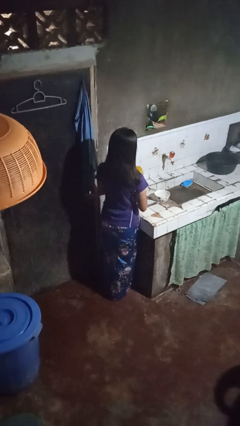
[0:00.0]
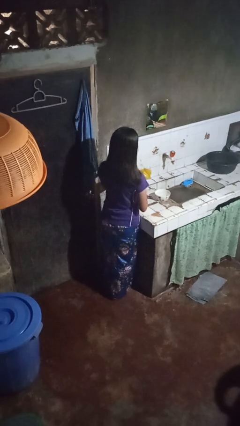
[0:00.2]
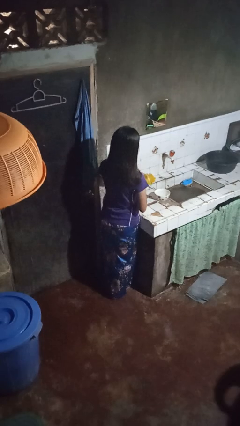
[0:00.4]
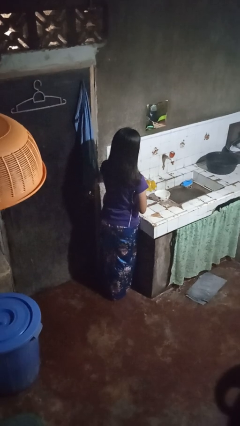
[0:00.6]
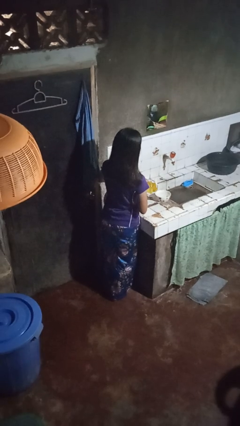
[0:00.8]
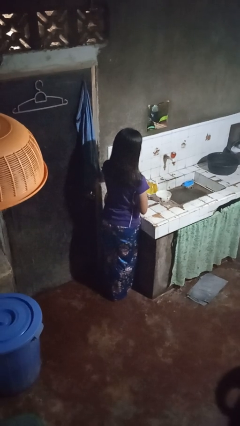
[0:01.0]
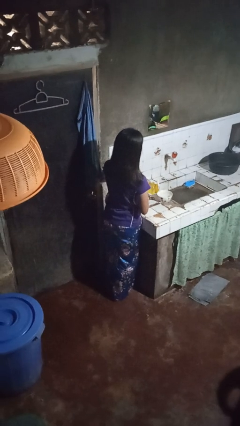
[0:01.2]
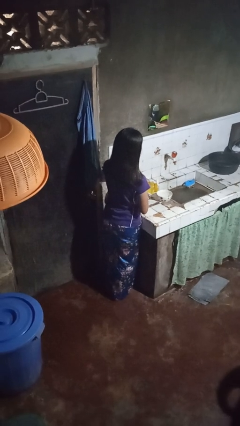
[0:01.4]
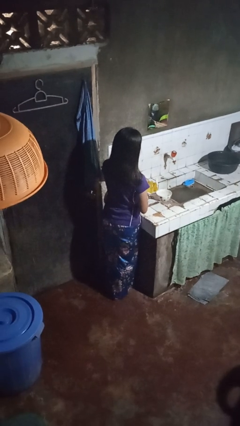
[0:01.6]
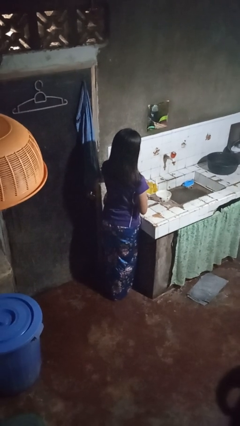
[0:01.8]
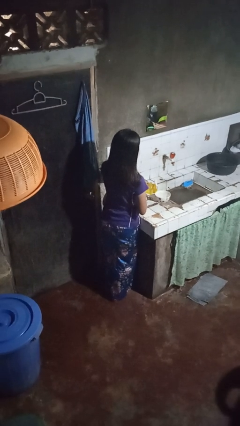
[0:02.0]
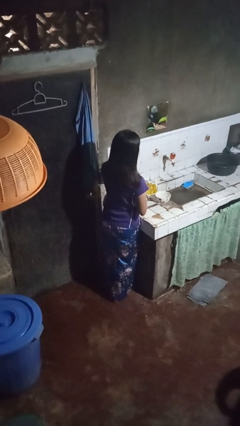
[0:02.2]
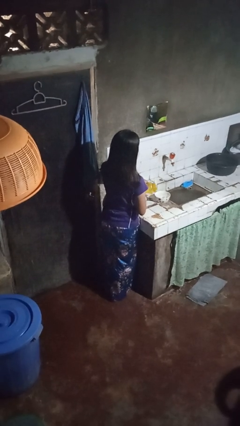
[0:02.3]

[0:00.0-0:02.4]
person pours into bowl

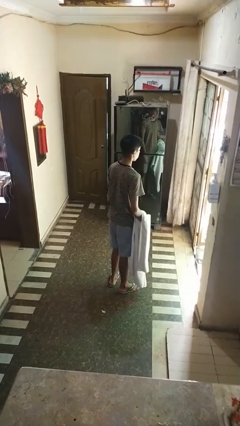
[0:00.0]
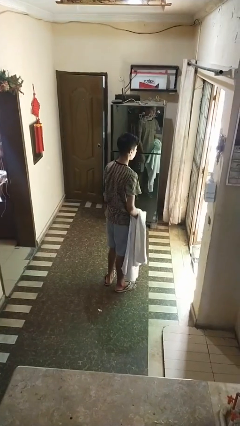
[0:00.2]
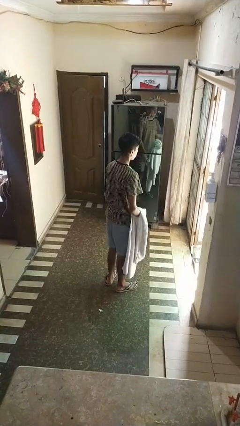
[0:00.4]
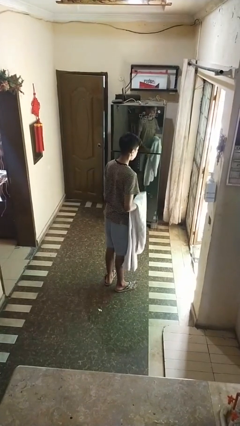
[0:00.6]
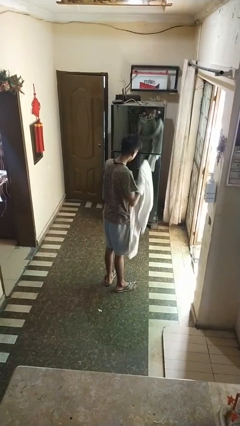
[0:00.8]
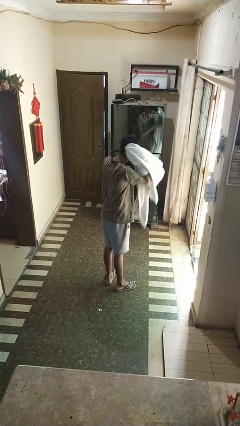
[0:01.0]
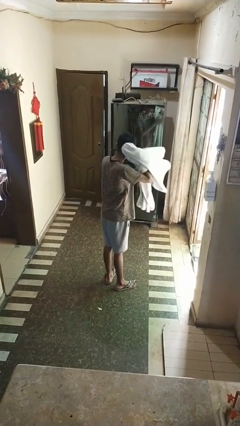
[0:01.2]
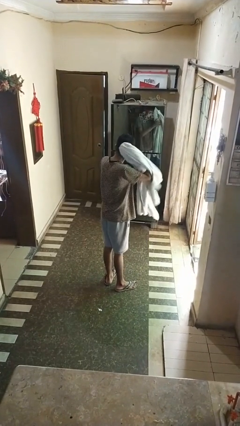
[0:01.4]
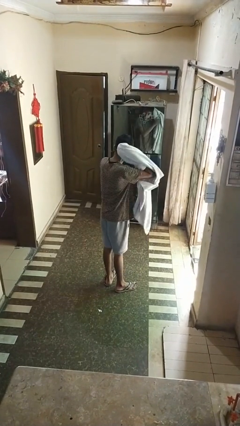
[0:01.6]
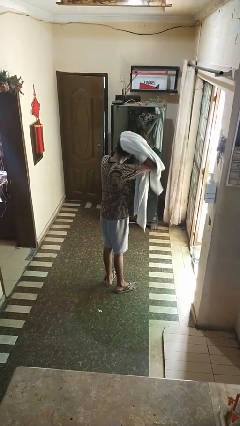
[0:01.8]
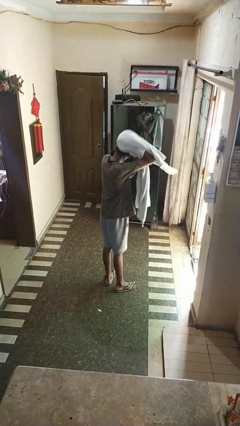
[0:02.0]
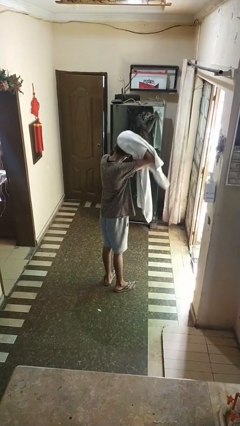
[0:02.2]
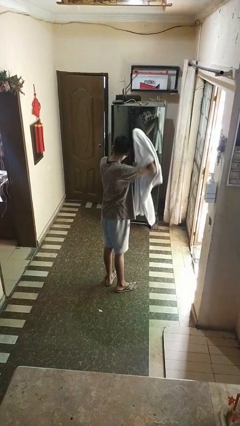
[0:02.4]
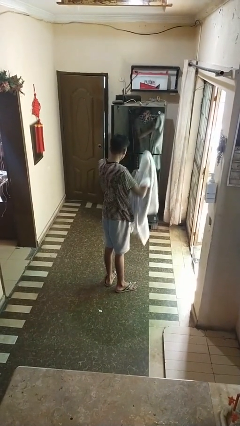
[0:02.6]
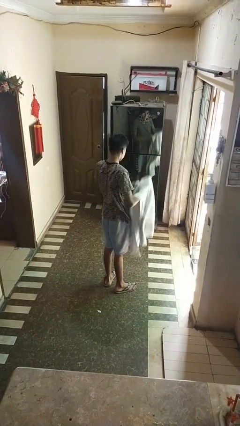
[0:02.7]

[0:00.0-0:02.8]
person dries hair with towel

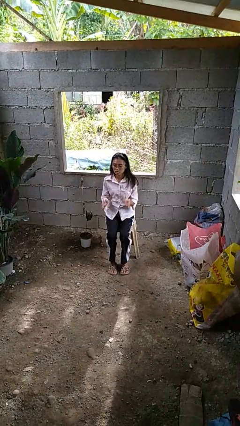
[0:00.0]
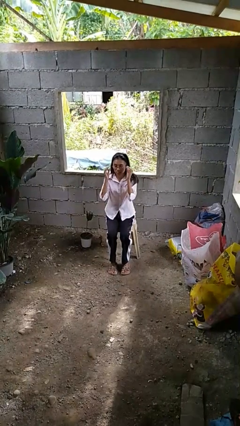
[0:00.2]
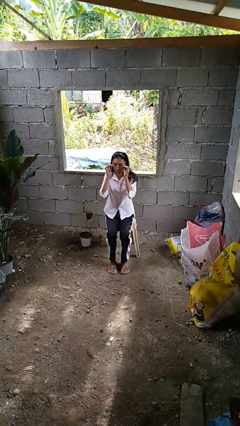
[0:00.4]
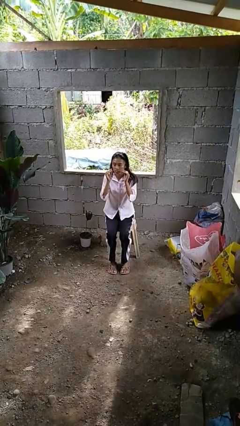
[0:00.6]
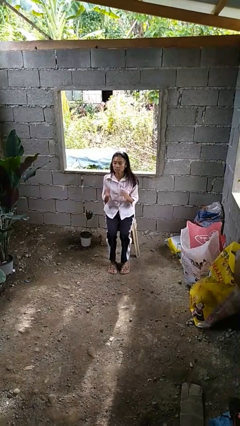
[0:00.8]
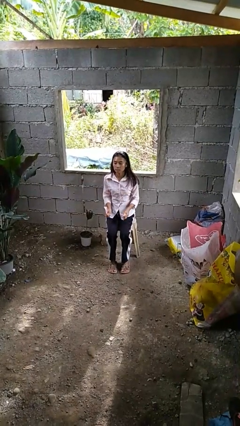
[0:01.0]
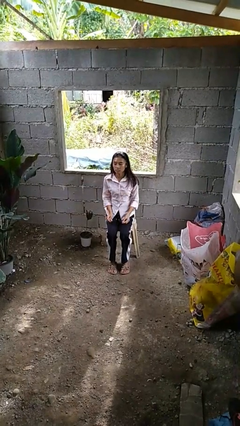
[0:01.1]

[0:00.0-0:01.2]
person takes off glasses

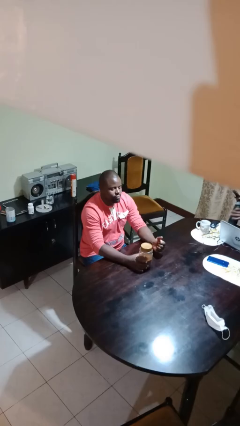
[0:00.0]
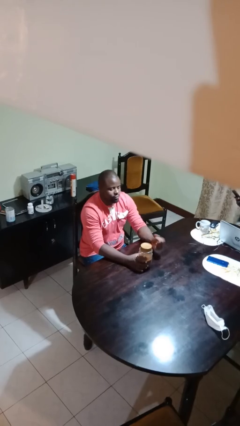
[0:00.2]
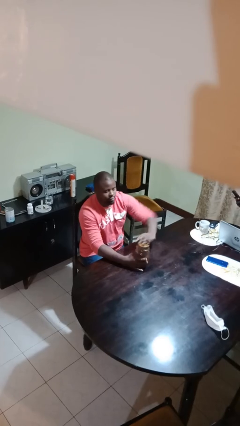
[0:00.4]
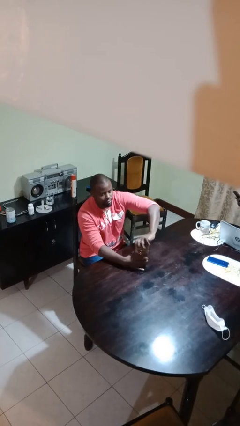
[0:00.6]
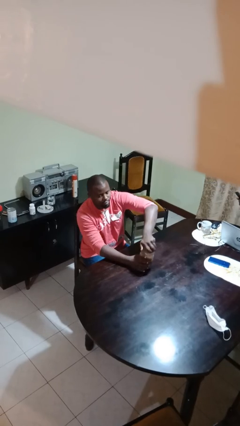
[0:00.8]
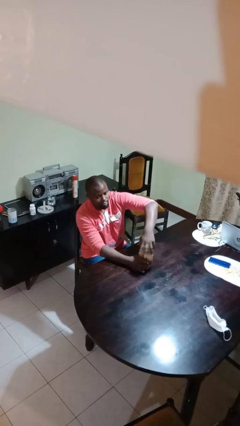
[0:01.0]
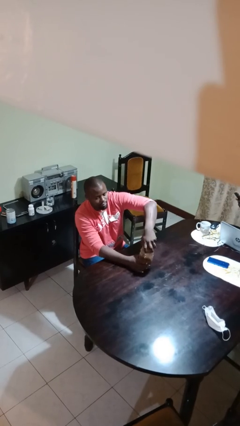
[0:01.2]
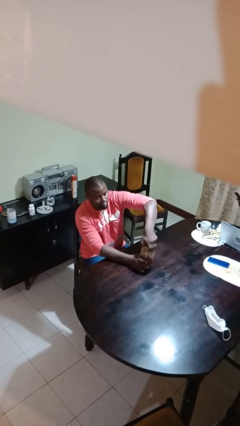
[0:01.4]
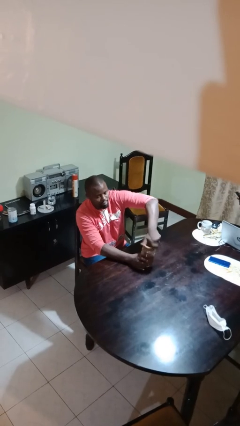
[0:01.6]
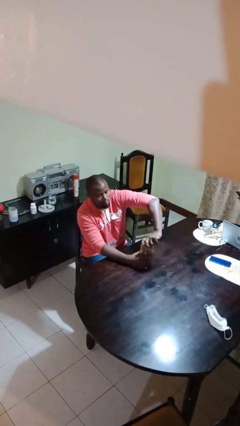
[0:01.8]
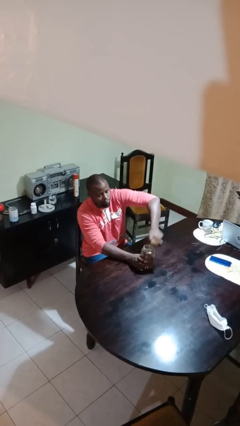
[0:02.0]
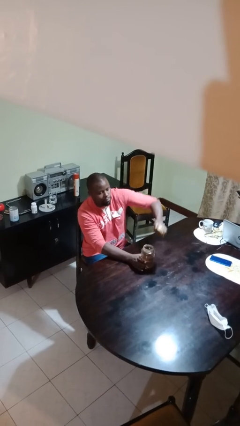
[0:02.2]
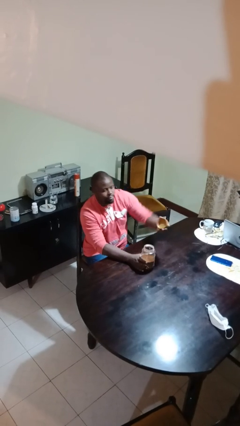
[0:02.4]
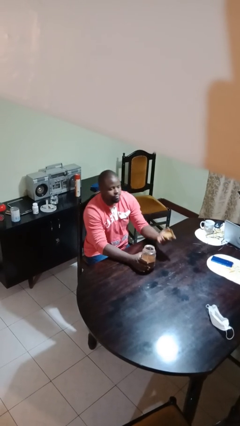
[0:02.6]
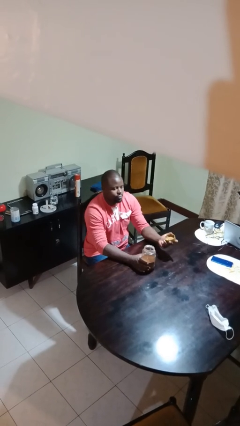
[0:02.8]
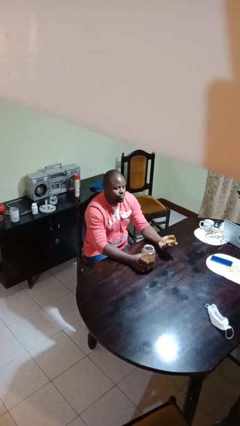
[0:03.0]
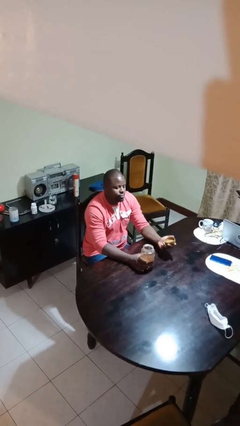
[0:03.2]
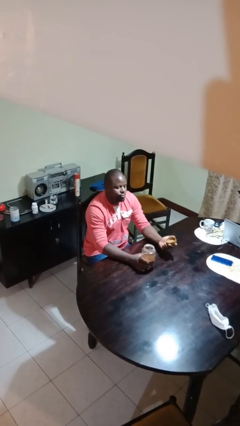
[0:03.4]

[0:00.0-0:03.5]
person opens jar

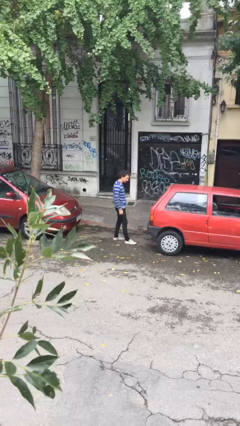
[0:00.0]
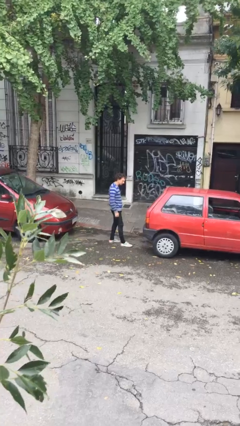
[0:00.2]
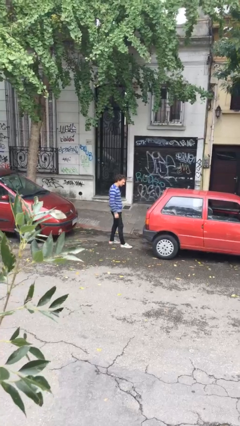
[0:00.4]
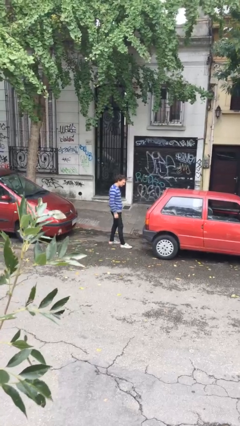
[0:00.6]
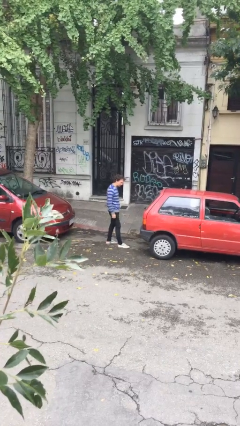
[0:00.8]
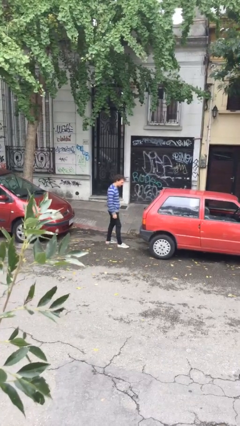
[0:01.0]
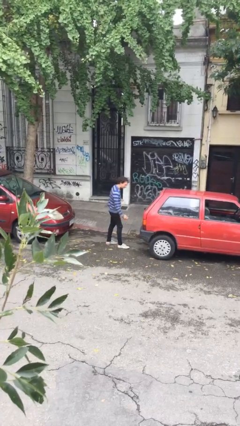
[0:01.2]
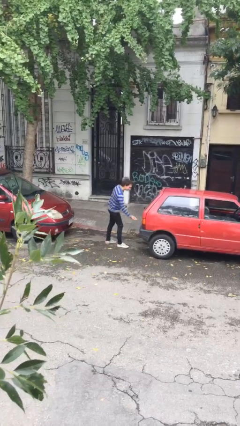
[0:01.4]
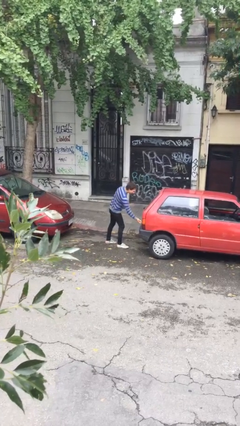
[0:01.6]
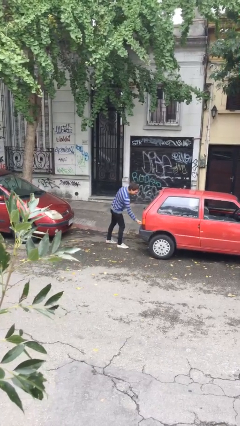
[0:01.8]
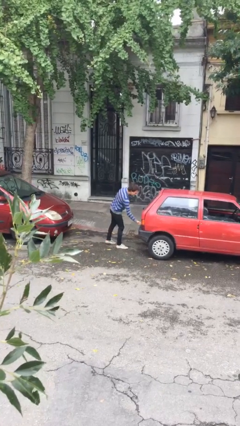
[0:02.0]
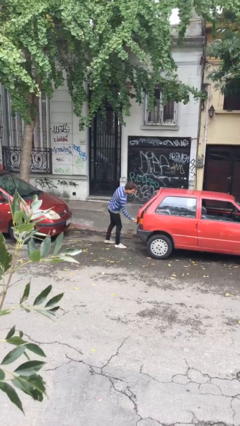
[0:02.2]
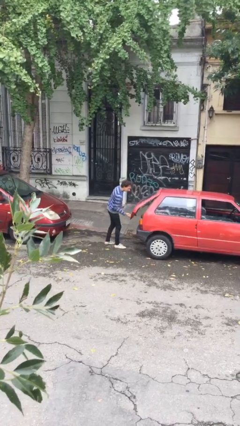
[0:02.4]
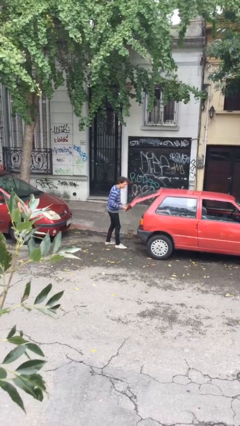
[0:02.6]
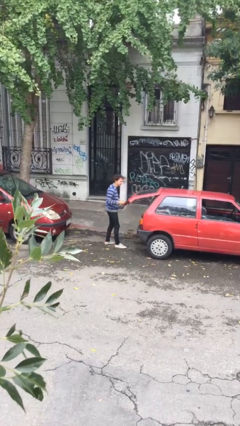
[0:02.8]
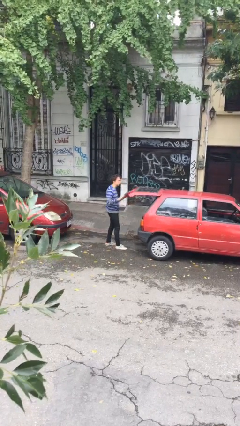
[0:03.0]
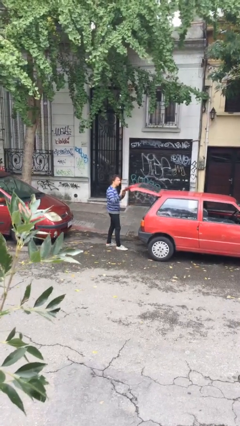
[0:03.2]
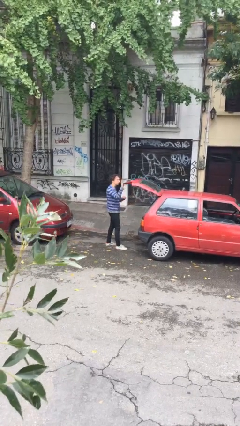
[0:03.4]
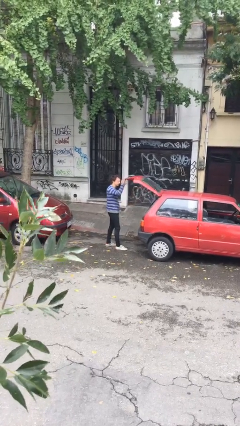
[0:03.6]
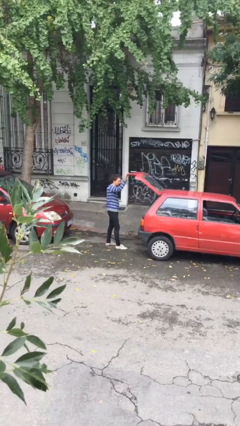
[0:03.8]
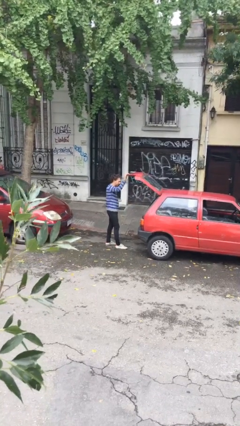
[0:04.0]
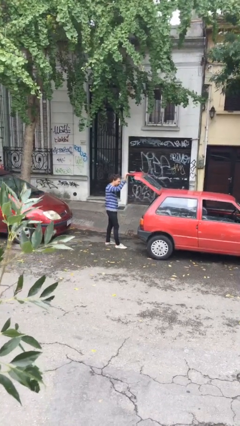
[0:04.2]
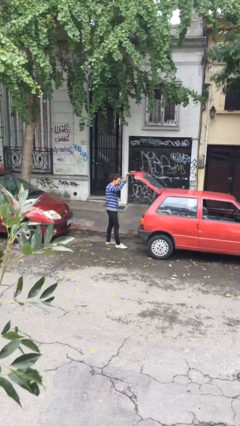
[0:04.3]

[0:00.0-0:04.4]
person opens car trunk

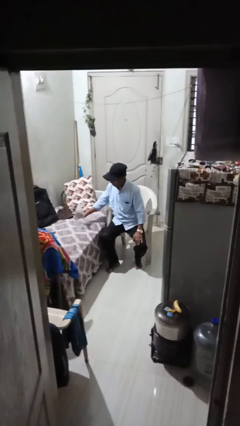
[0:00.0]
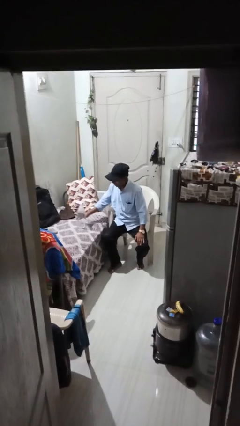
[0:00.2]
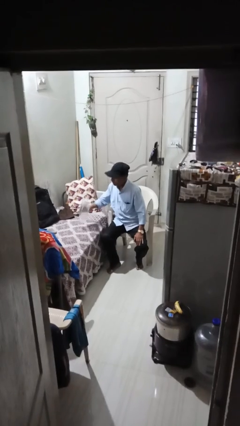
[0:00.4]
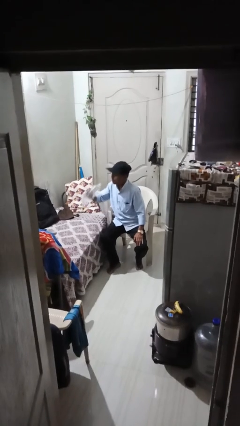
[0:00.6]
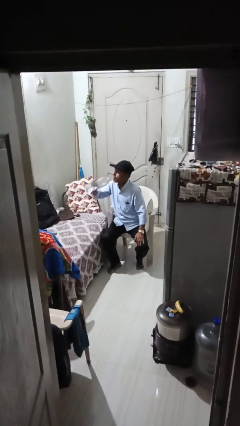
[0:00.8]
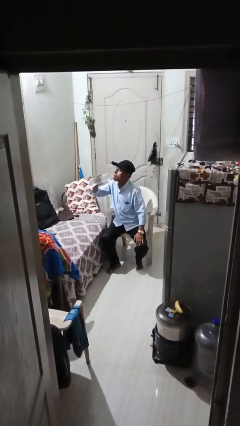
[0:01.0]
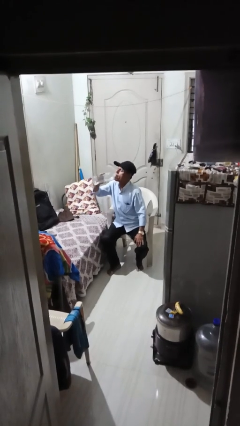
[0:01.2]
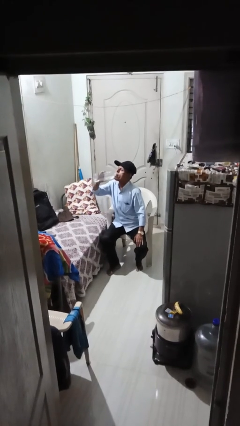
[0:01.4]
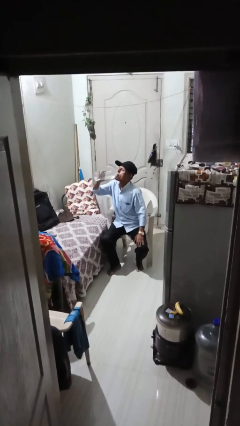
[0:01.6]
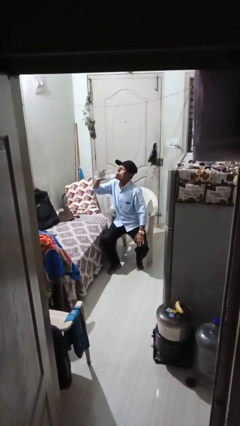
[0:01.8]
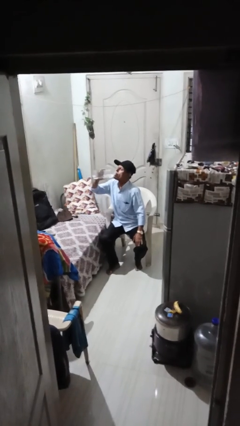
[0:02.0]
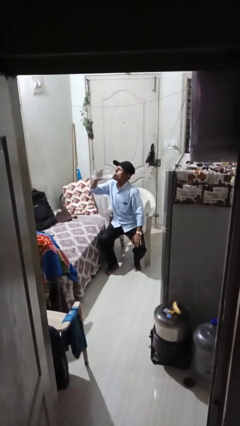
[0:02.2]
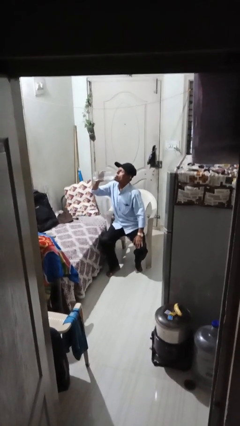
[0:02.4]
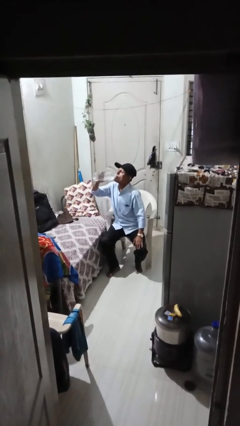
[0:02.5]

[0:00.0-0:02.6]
person drinks from bottle

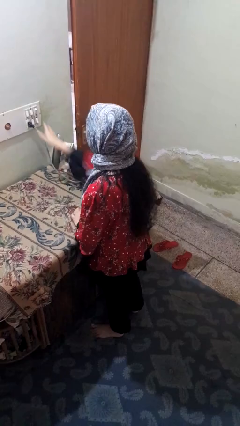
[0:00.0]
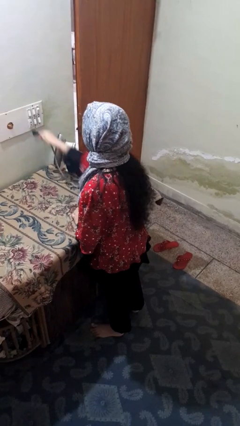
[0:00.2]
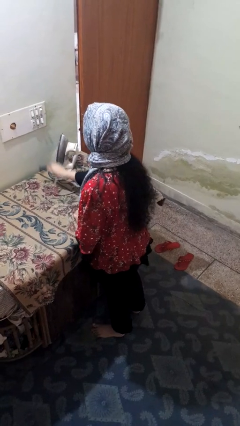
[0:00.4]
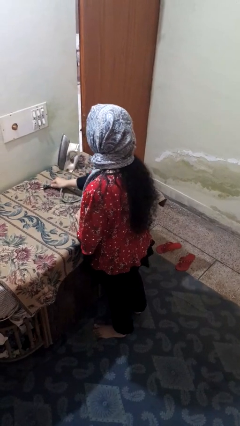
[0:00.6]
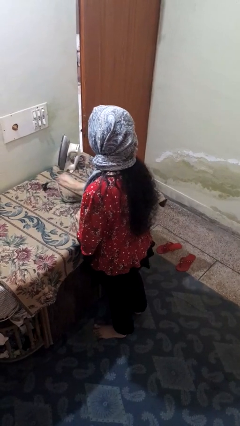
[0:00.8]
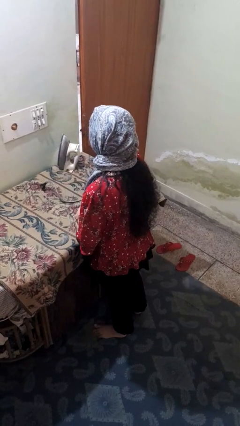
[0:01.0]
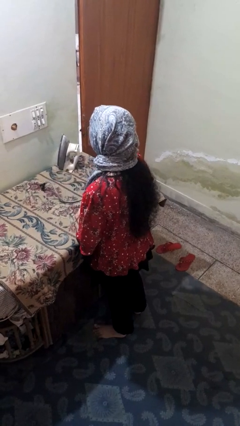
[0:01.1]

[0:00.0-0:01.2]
person unplugs from electrical socket
